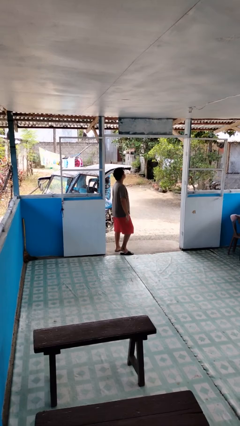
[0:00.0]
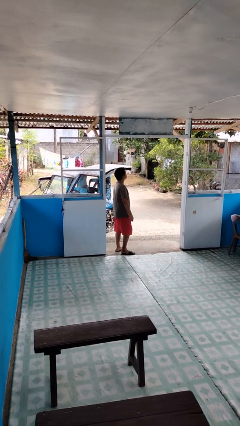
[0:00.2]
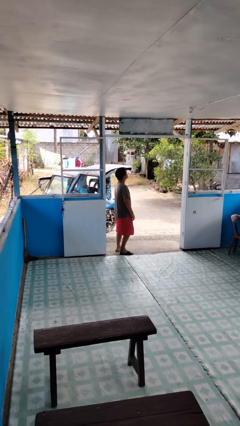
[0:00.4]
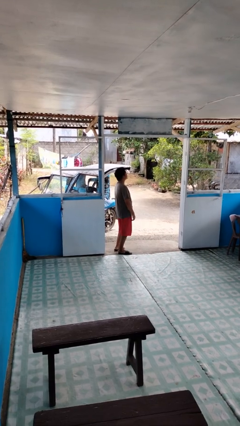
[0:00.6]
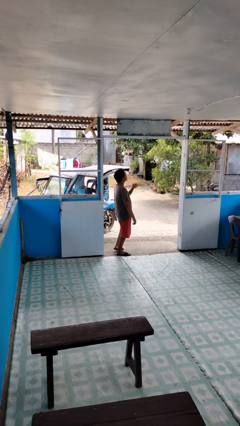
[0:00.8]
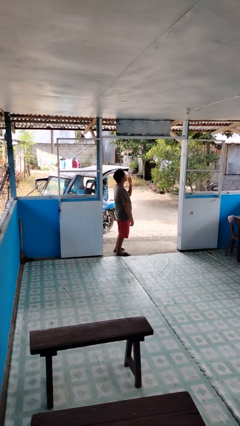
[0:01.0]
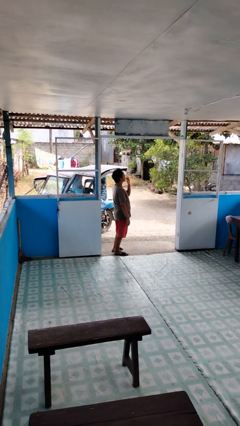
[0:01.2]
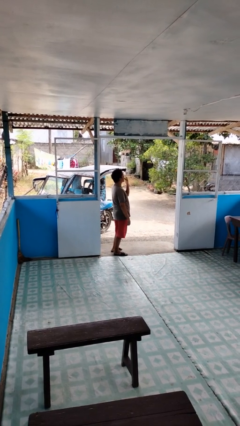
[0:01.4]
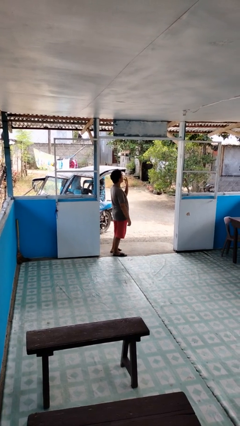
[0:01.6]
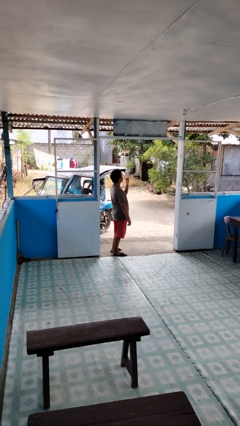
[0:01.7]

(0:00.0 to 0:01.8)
person licks fingers

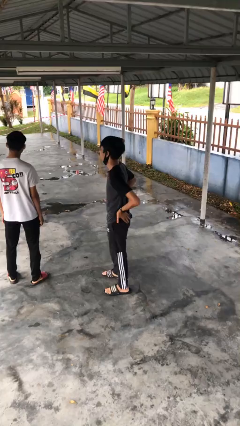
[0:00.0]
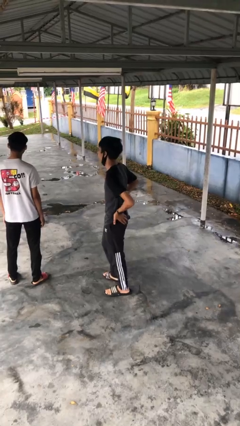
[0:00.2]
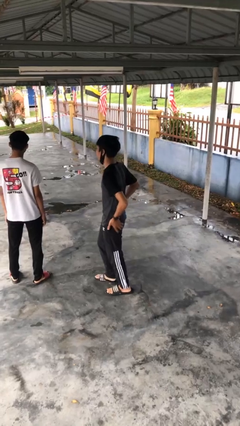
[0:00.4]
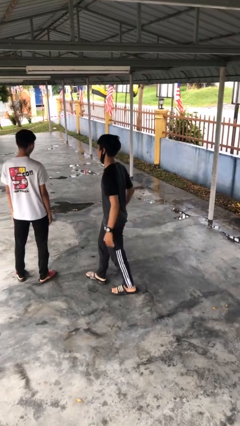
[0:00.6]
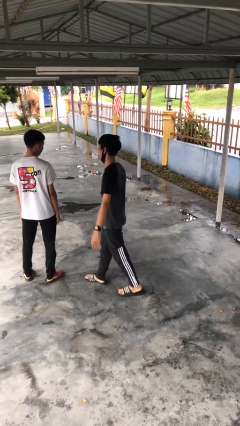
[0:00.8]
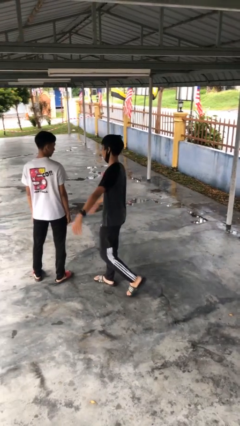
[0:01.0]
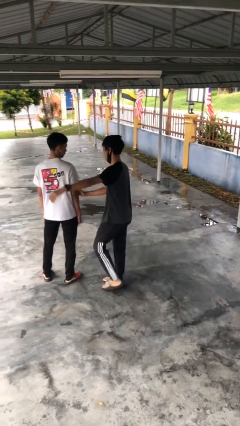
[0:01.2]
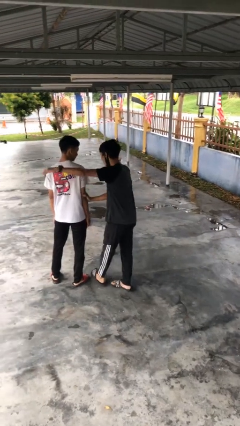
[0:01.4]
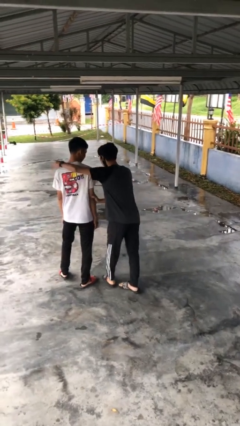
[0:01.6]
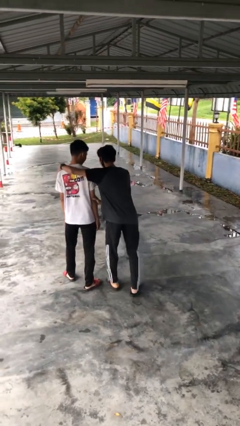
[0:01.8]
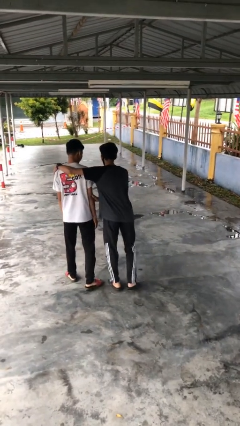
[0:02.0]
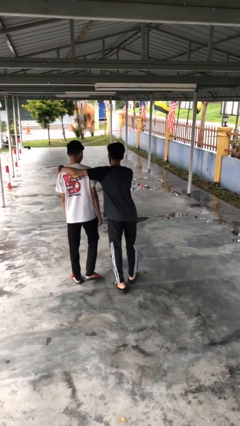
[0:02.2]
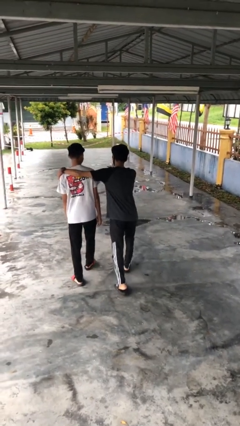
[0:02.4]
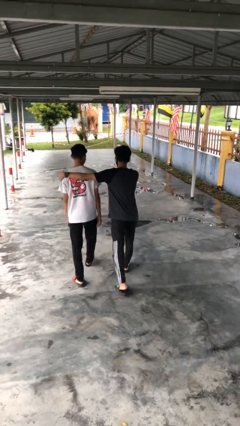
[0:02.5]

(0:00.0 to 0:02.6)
person embraces person

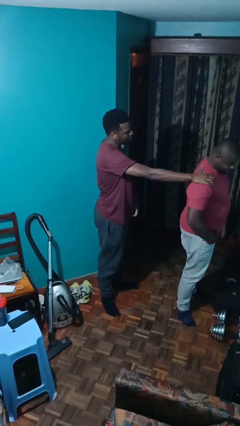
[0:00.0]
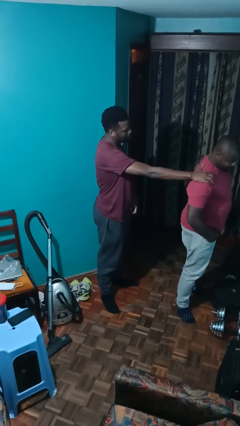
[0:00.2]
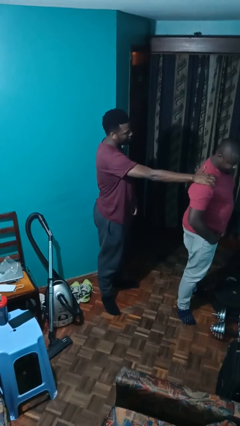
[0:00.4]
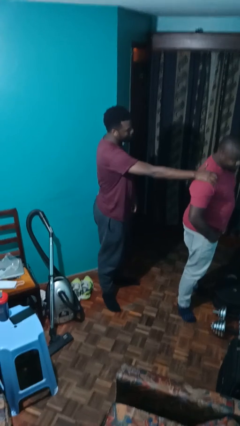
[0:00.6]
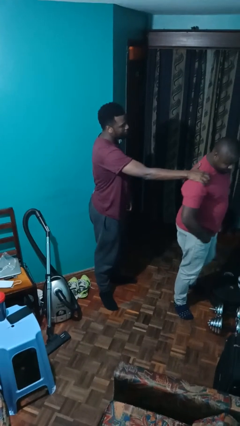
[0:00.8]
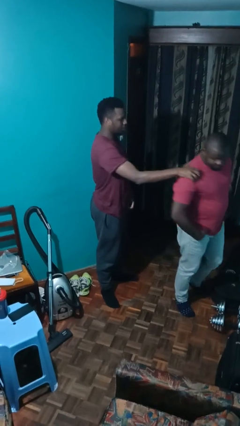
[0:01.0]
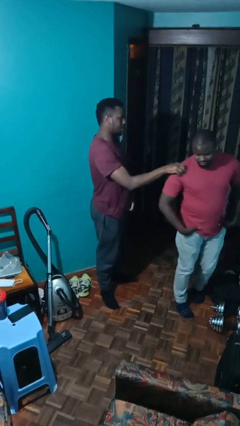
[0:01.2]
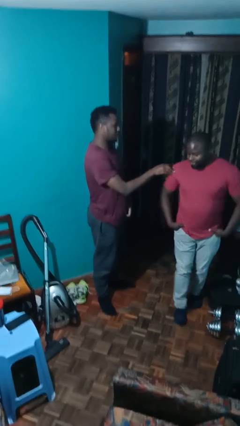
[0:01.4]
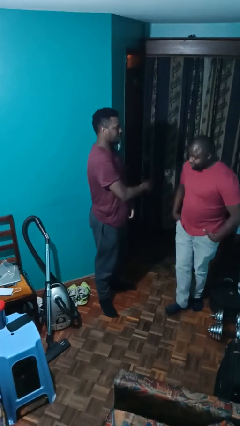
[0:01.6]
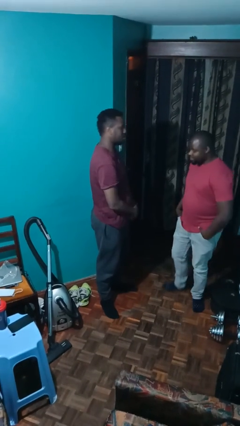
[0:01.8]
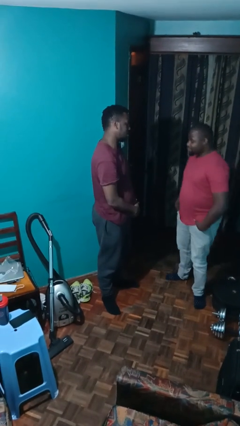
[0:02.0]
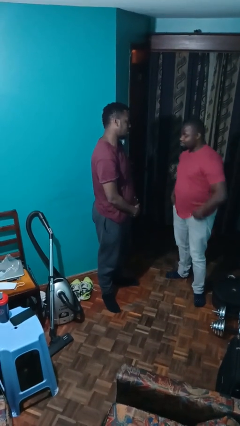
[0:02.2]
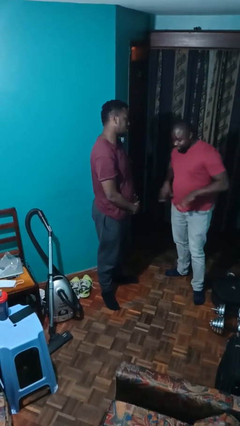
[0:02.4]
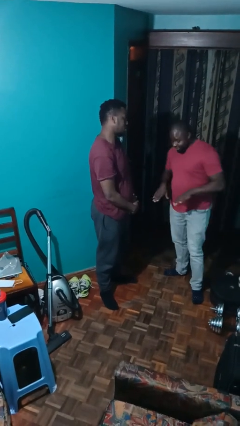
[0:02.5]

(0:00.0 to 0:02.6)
person spins person around

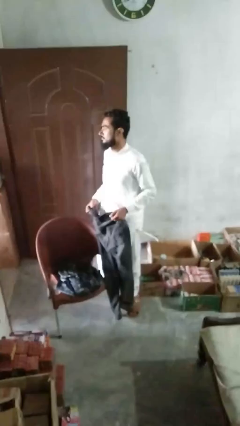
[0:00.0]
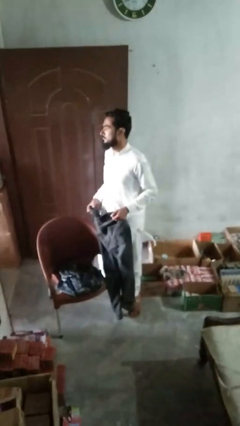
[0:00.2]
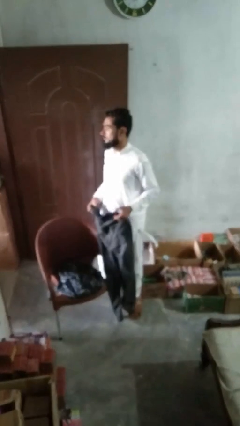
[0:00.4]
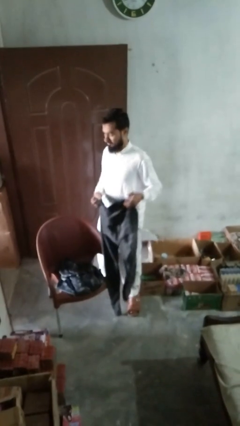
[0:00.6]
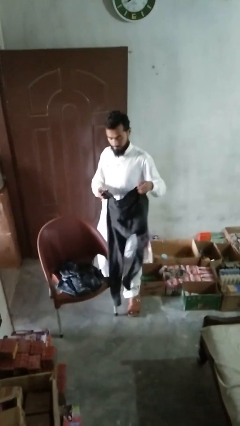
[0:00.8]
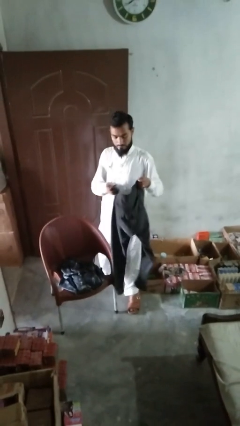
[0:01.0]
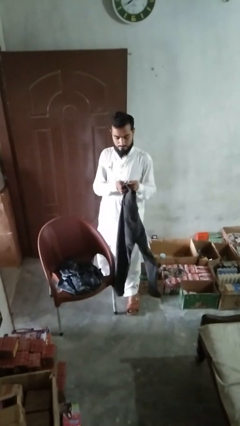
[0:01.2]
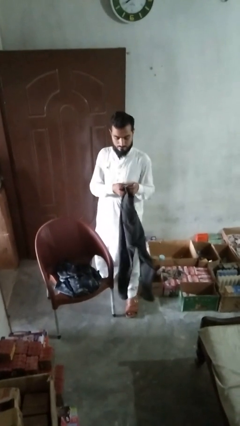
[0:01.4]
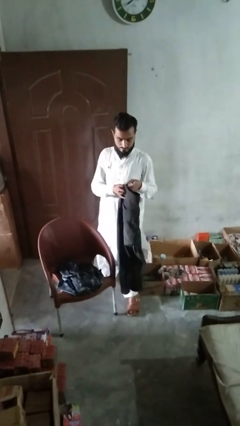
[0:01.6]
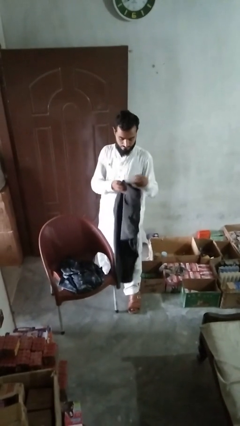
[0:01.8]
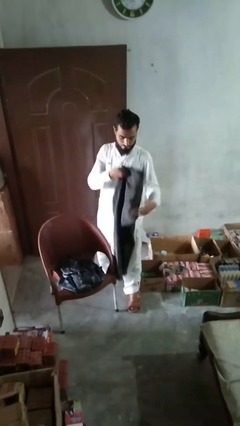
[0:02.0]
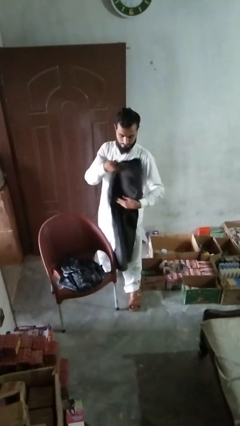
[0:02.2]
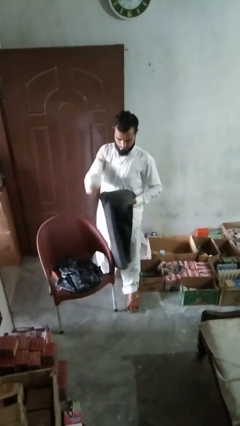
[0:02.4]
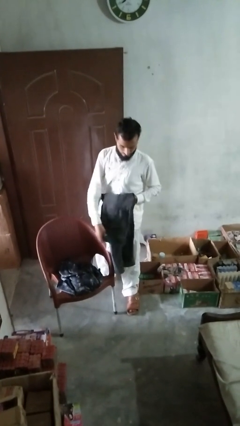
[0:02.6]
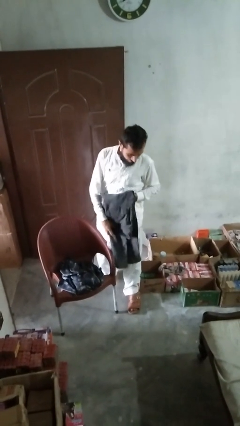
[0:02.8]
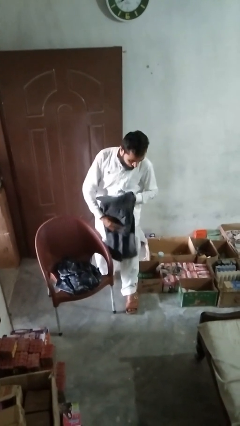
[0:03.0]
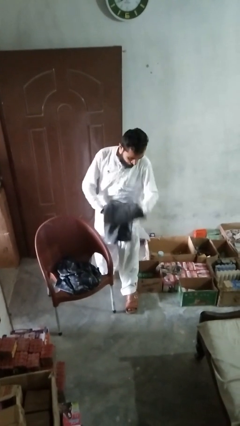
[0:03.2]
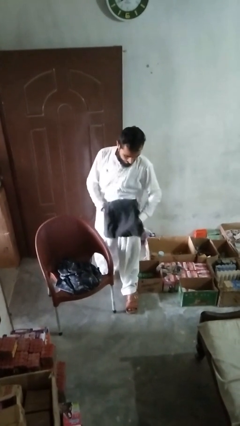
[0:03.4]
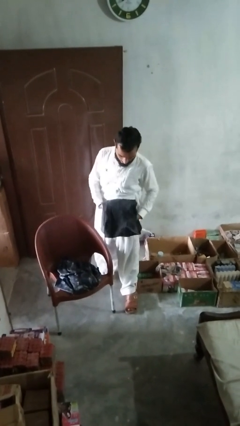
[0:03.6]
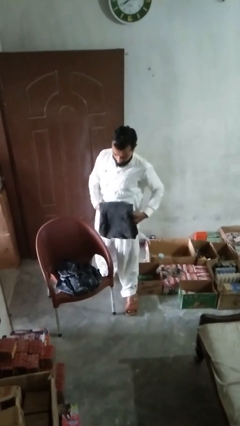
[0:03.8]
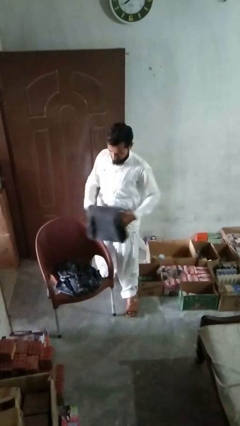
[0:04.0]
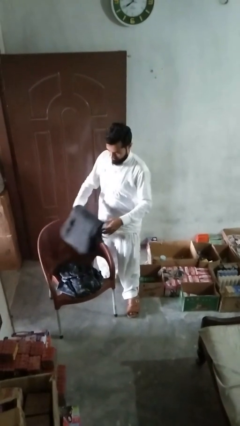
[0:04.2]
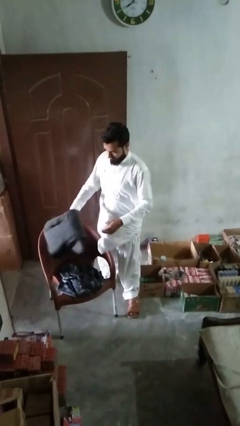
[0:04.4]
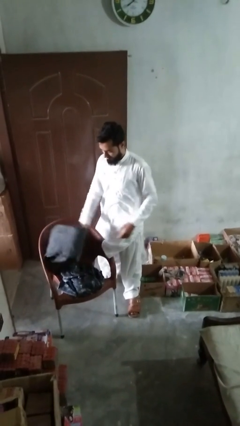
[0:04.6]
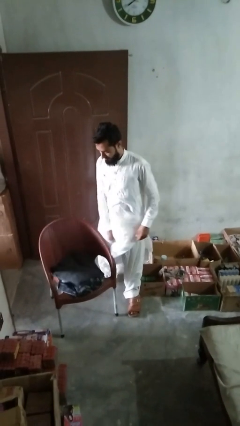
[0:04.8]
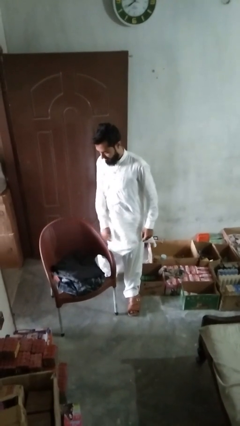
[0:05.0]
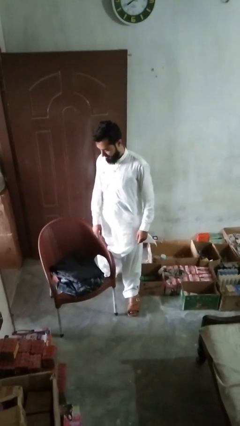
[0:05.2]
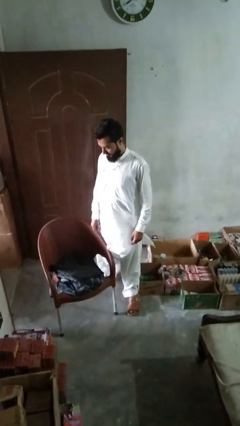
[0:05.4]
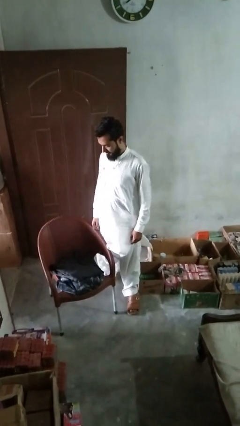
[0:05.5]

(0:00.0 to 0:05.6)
person folds pants

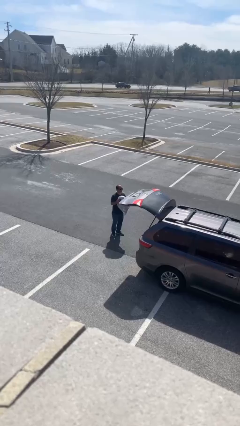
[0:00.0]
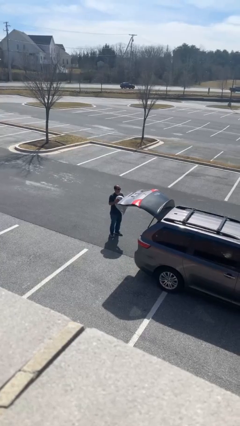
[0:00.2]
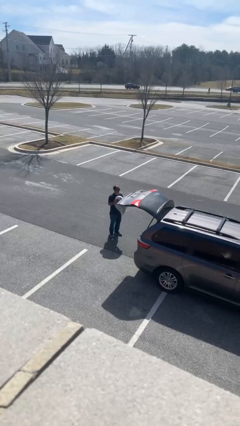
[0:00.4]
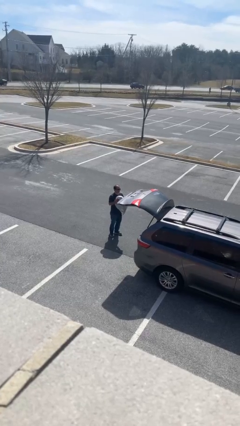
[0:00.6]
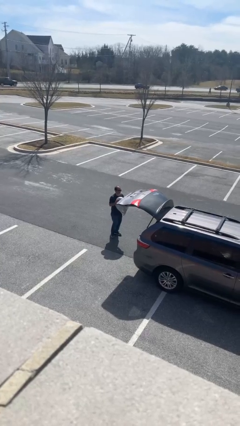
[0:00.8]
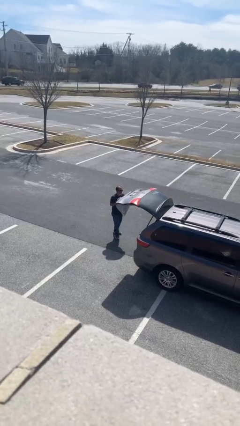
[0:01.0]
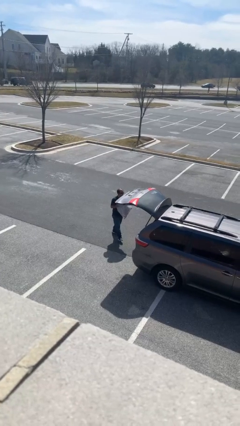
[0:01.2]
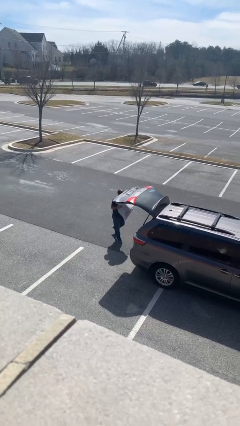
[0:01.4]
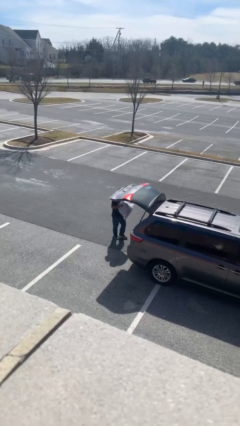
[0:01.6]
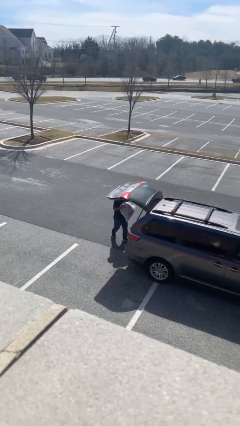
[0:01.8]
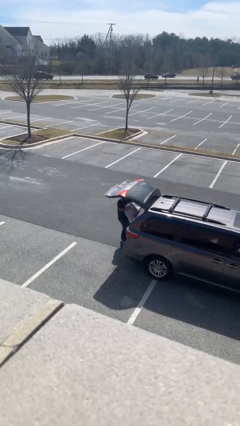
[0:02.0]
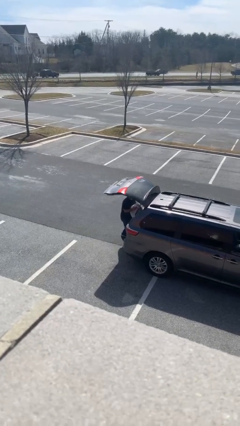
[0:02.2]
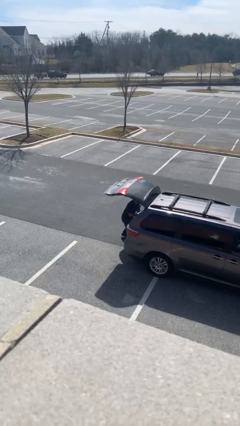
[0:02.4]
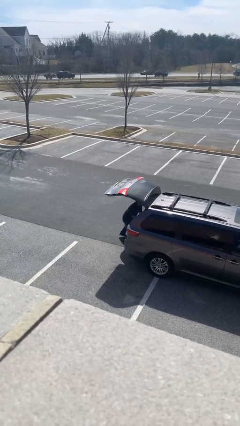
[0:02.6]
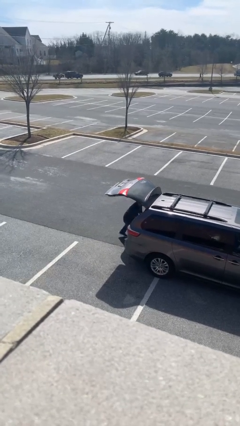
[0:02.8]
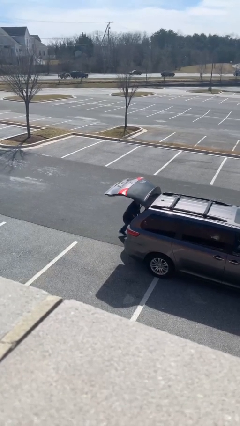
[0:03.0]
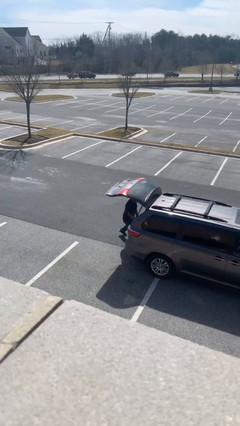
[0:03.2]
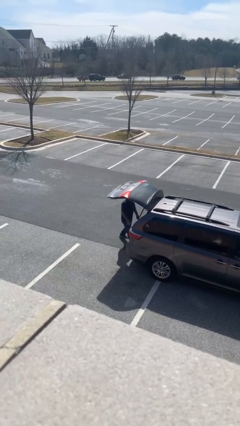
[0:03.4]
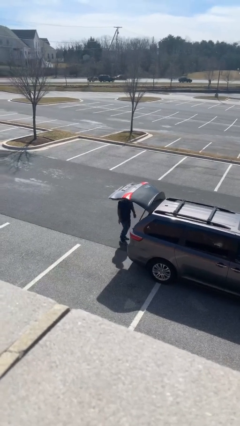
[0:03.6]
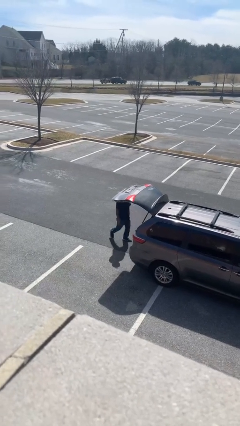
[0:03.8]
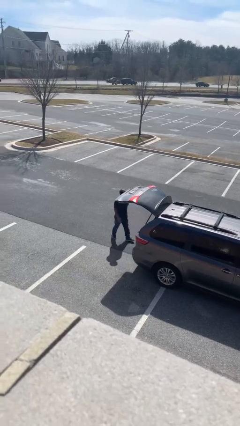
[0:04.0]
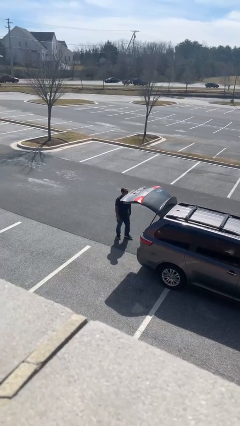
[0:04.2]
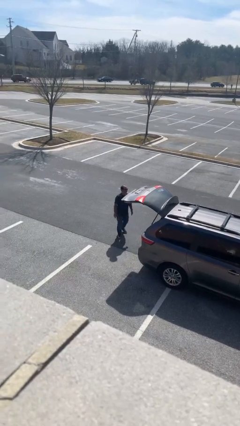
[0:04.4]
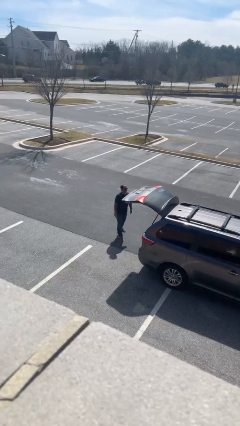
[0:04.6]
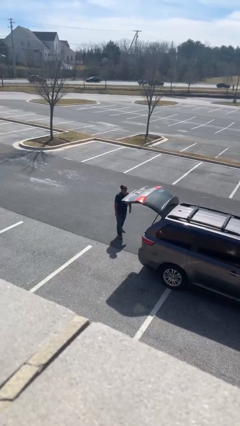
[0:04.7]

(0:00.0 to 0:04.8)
person loads car

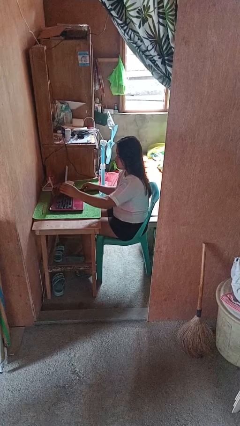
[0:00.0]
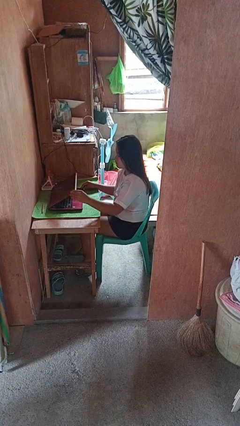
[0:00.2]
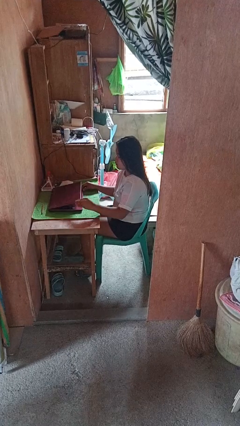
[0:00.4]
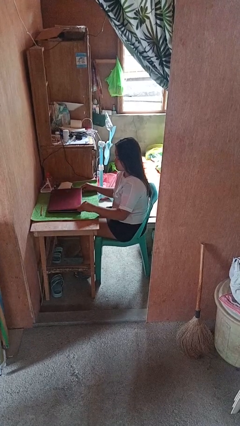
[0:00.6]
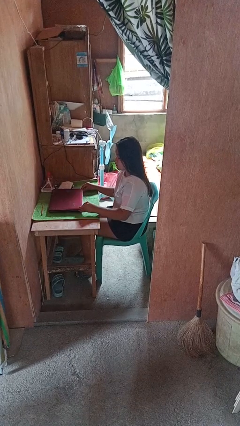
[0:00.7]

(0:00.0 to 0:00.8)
person closes laptop
